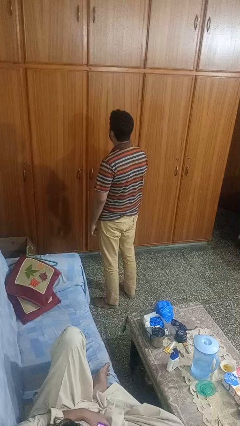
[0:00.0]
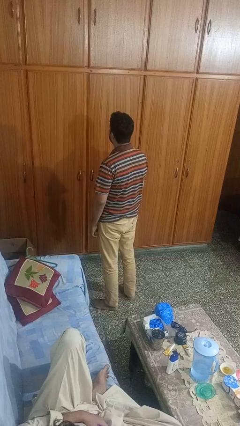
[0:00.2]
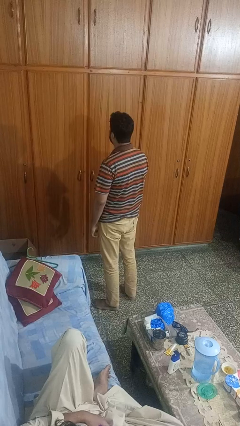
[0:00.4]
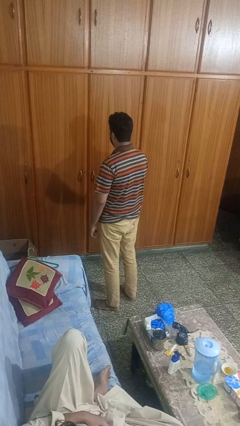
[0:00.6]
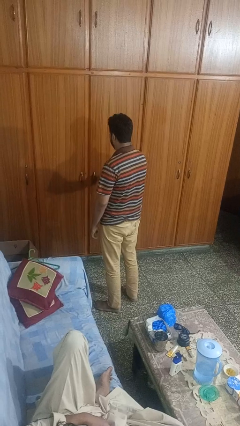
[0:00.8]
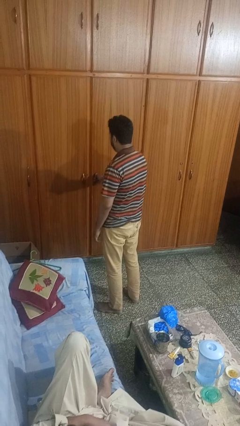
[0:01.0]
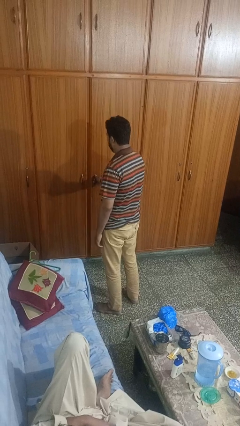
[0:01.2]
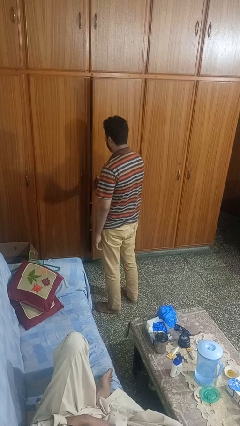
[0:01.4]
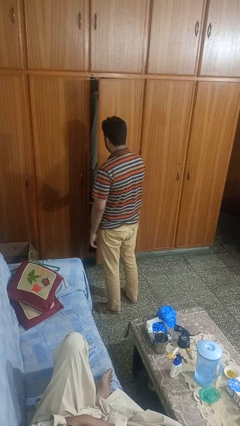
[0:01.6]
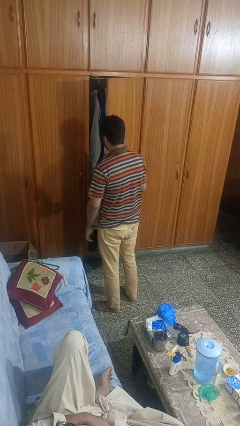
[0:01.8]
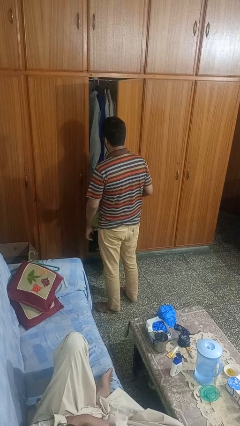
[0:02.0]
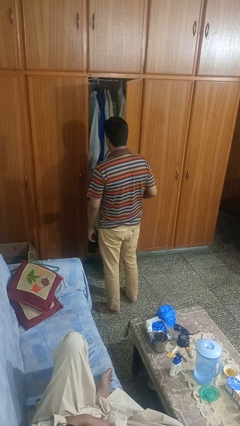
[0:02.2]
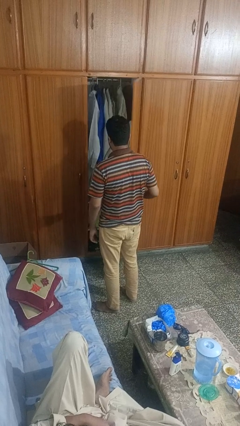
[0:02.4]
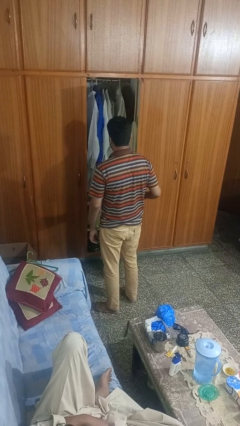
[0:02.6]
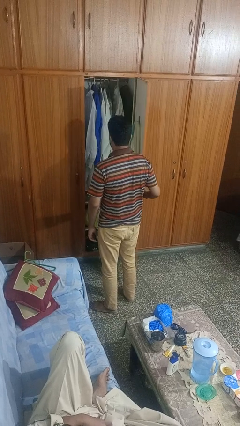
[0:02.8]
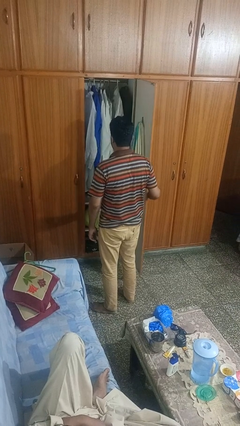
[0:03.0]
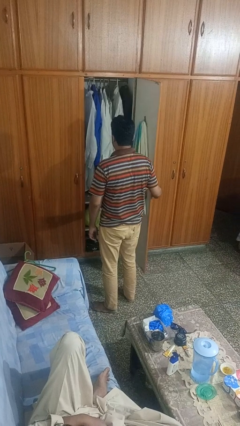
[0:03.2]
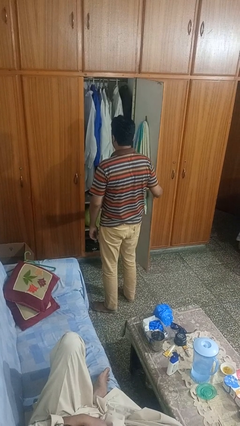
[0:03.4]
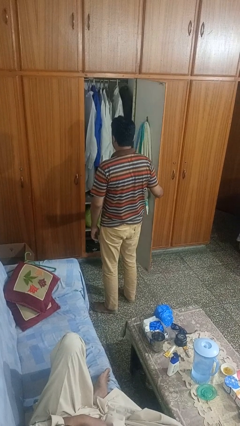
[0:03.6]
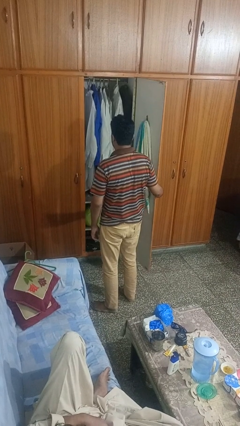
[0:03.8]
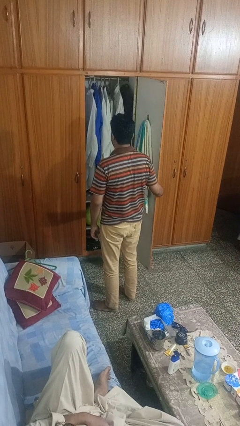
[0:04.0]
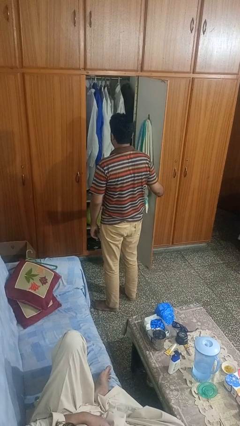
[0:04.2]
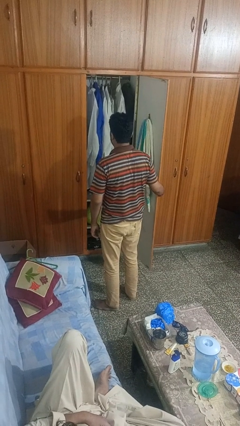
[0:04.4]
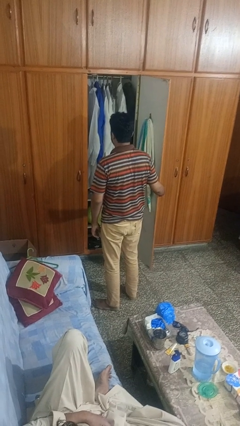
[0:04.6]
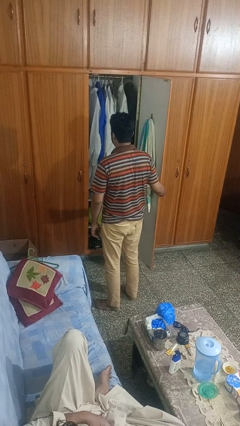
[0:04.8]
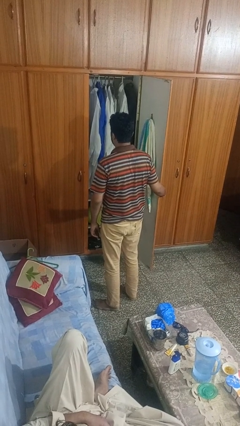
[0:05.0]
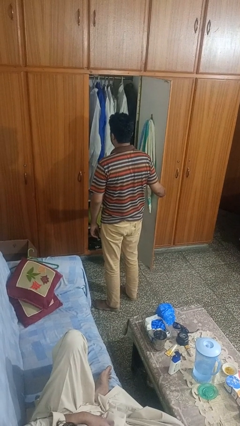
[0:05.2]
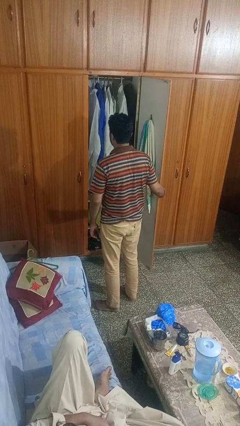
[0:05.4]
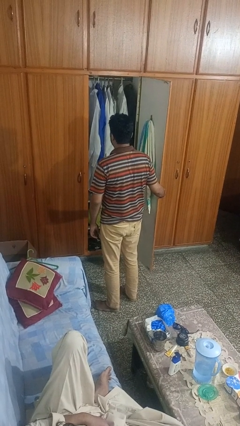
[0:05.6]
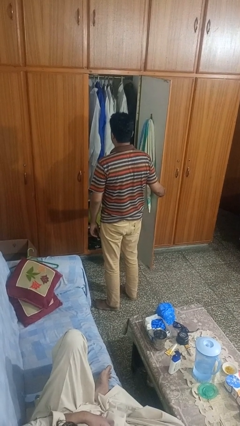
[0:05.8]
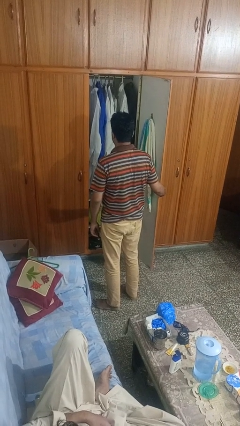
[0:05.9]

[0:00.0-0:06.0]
person opens closet door

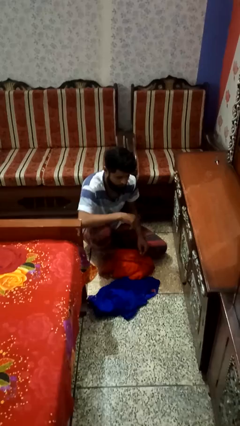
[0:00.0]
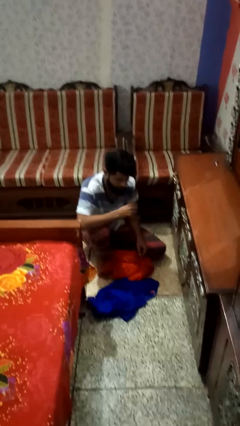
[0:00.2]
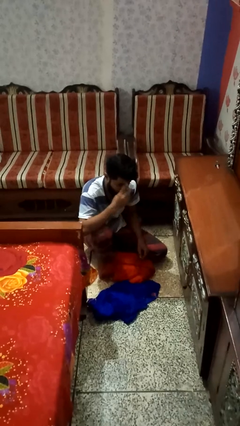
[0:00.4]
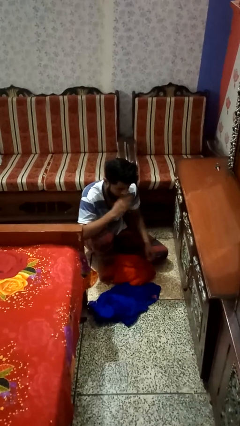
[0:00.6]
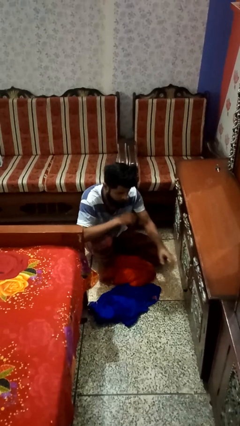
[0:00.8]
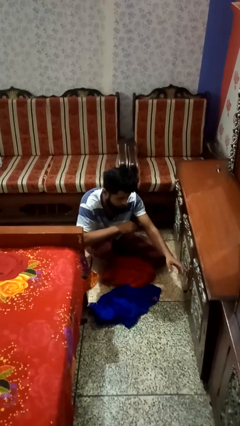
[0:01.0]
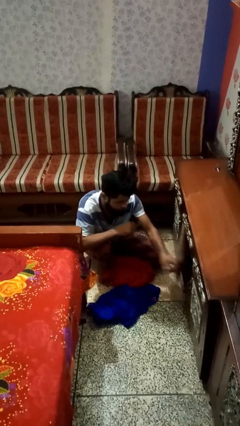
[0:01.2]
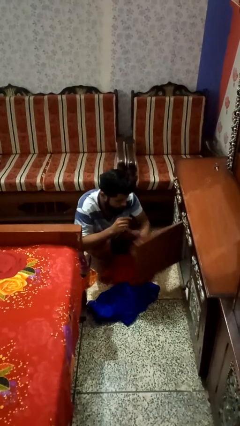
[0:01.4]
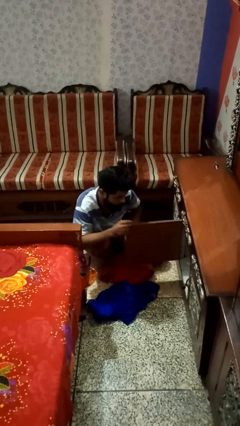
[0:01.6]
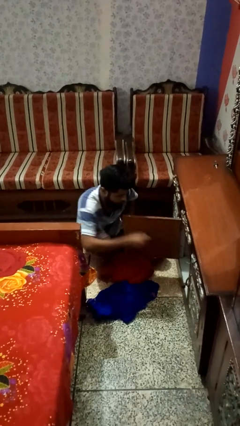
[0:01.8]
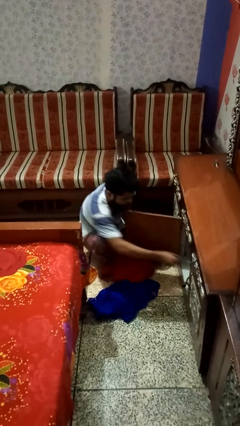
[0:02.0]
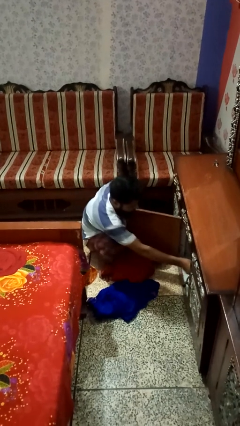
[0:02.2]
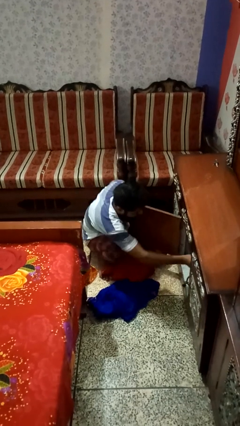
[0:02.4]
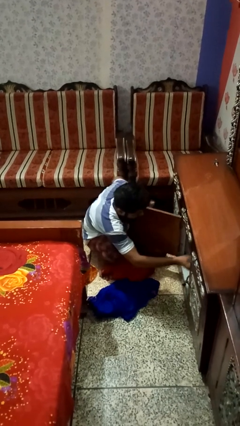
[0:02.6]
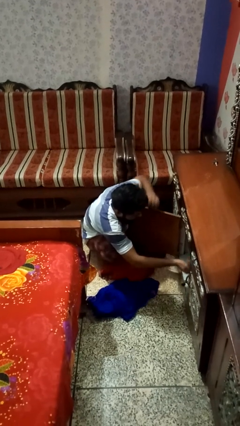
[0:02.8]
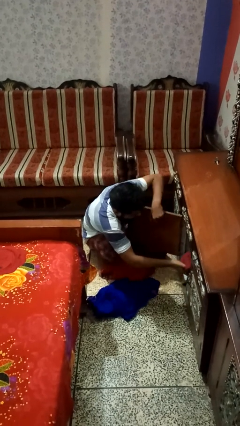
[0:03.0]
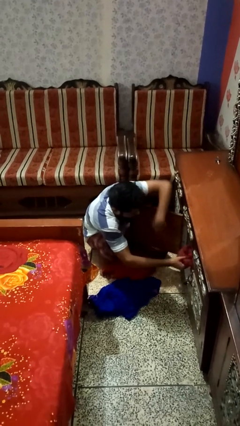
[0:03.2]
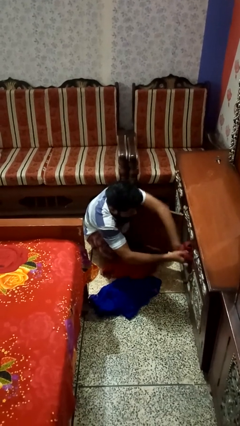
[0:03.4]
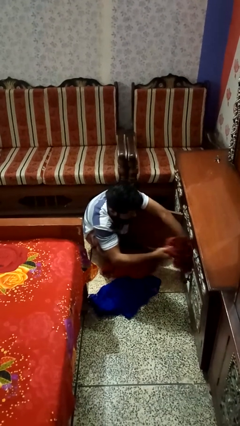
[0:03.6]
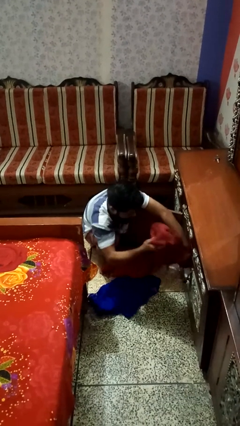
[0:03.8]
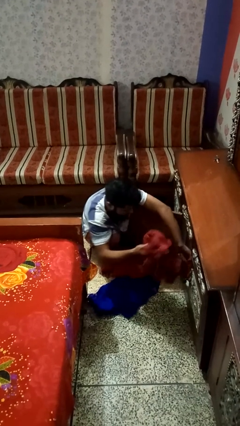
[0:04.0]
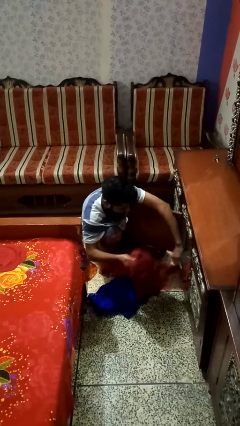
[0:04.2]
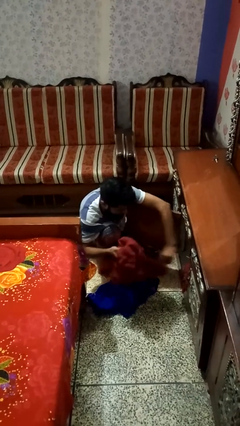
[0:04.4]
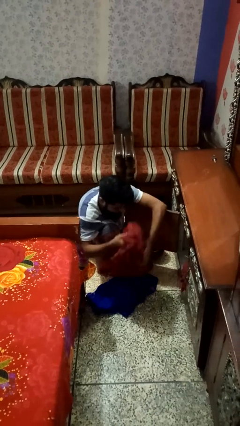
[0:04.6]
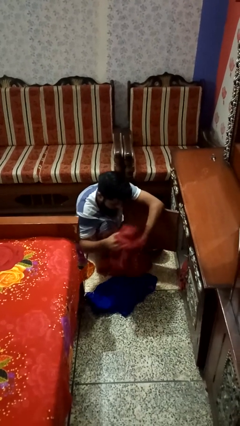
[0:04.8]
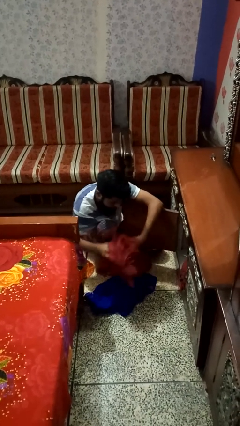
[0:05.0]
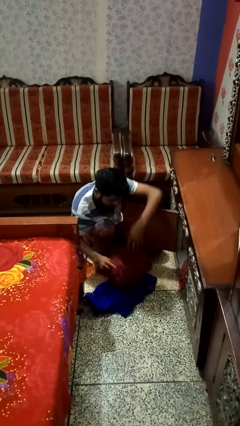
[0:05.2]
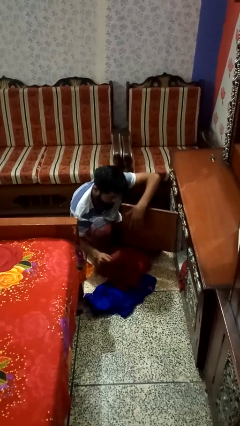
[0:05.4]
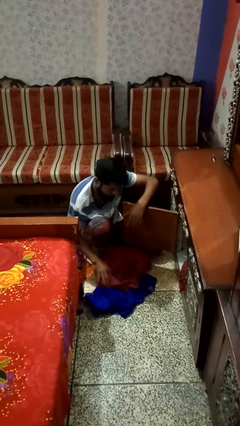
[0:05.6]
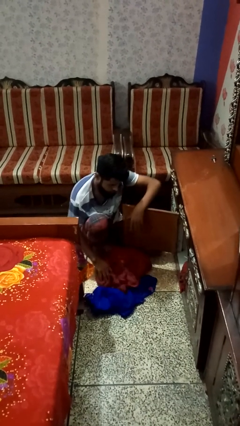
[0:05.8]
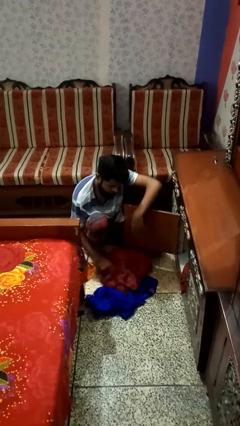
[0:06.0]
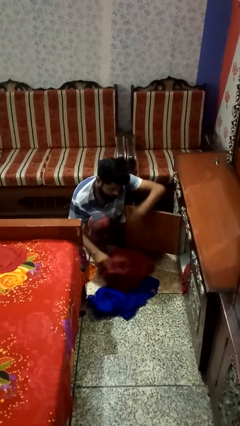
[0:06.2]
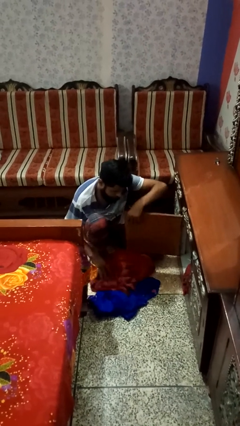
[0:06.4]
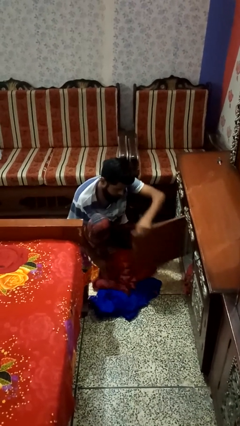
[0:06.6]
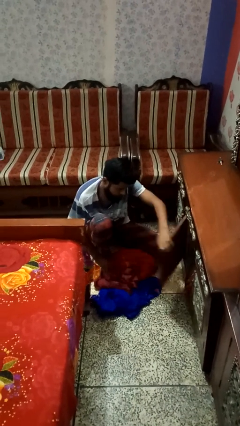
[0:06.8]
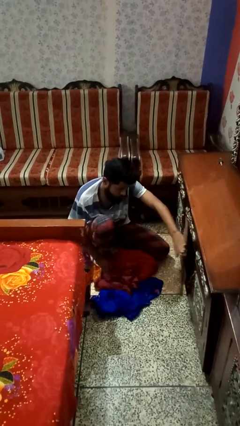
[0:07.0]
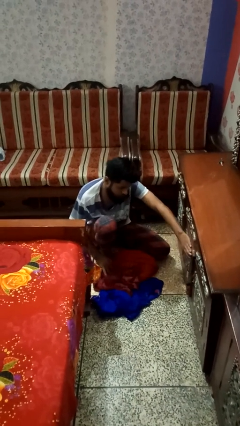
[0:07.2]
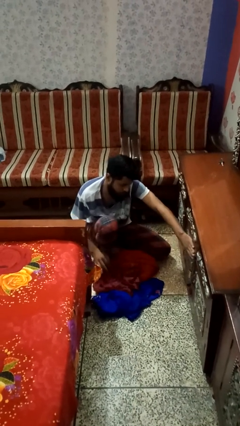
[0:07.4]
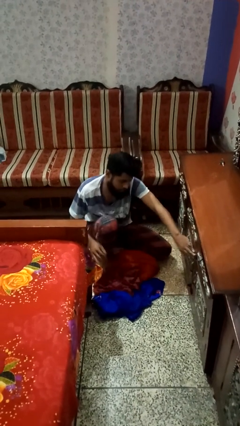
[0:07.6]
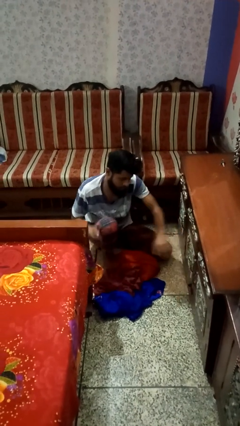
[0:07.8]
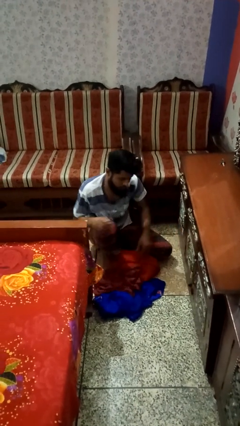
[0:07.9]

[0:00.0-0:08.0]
person takes clothes from dresser

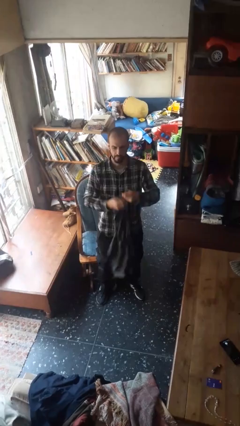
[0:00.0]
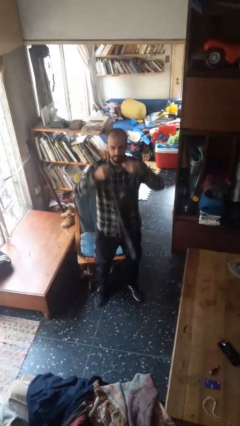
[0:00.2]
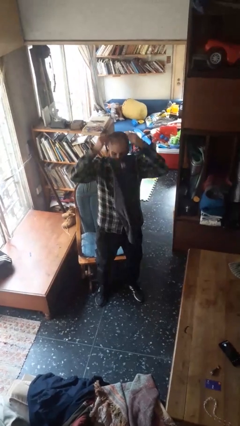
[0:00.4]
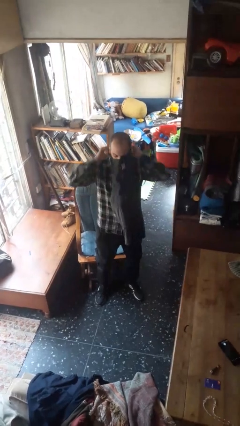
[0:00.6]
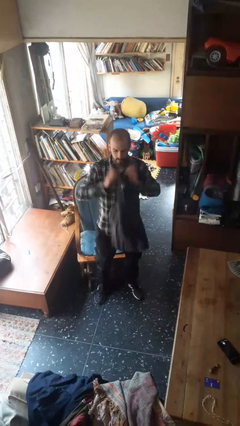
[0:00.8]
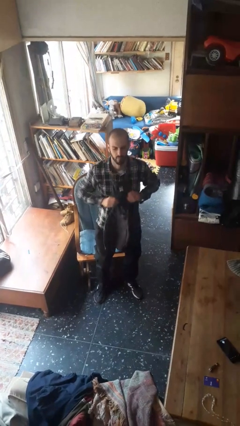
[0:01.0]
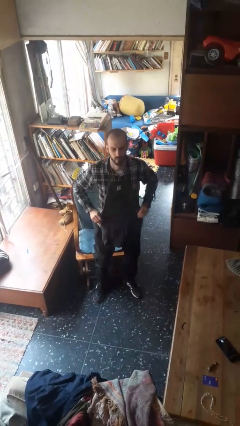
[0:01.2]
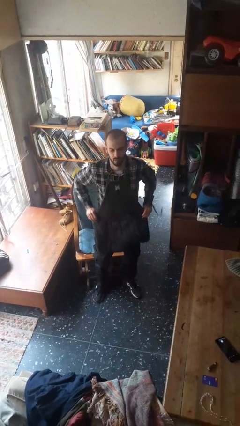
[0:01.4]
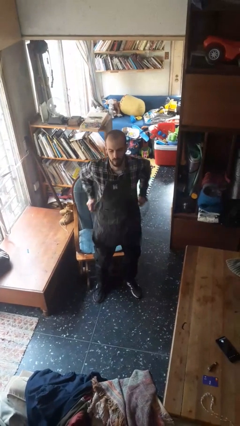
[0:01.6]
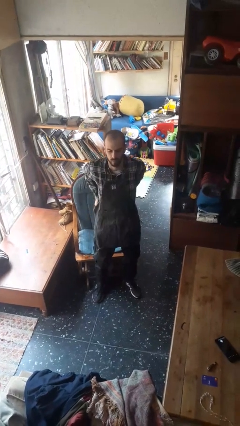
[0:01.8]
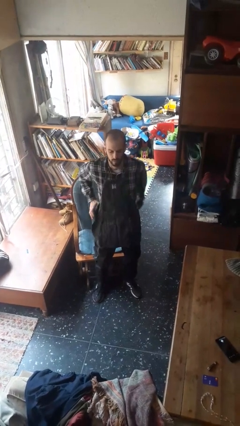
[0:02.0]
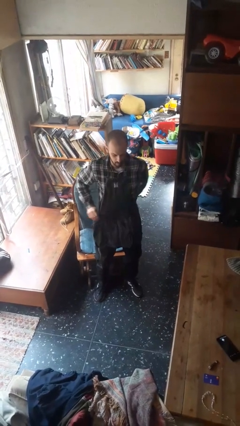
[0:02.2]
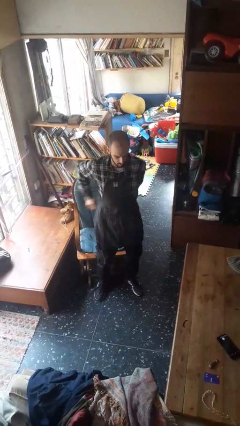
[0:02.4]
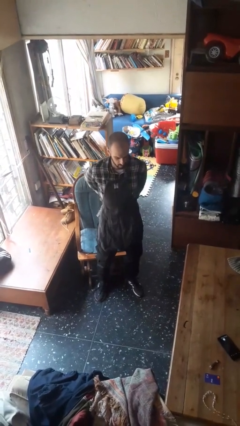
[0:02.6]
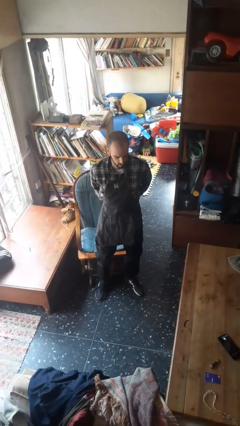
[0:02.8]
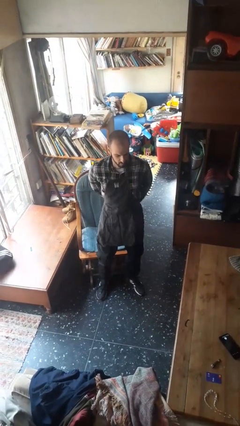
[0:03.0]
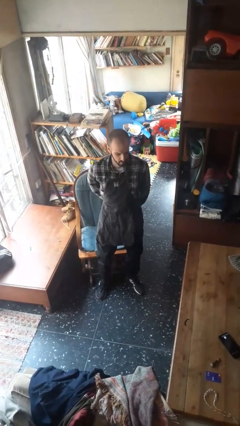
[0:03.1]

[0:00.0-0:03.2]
person puts on apron

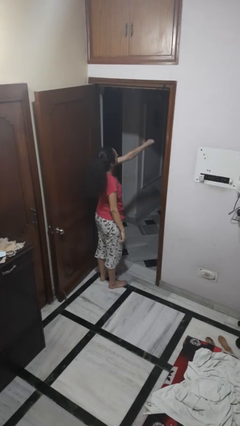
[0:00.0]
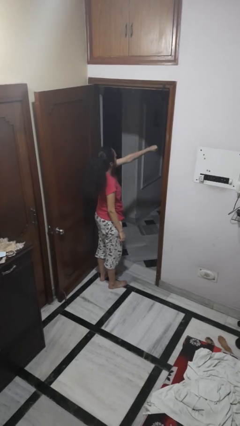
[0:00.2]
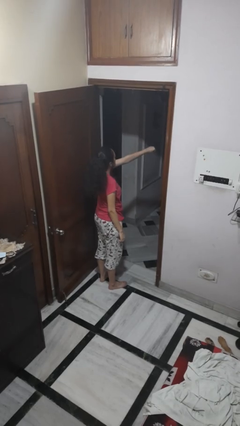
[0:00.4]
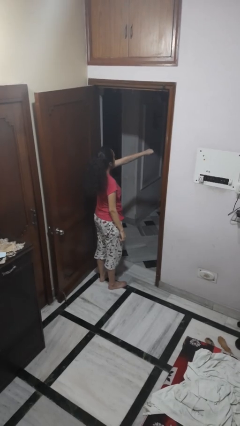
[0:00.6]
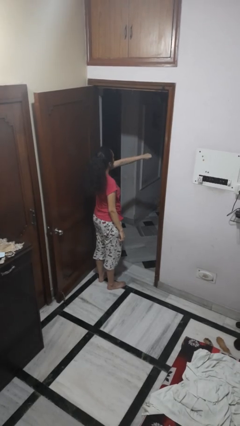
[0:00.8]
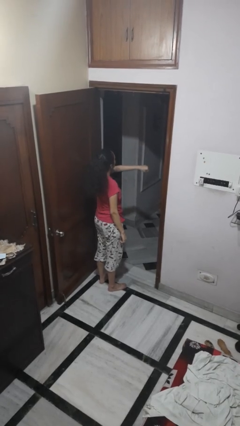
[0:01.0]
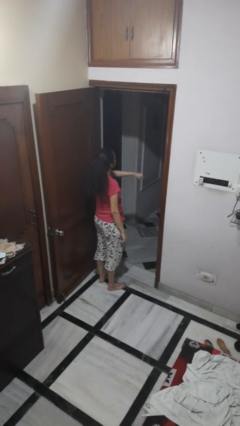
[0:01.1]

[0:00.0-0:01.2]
person punches
